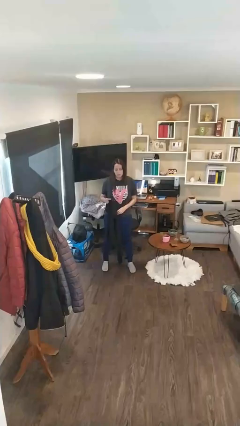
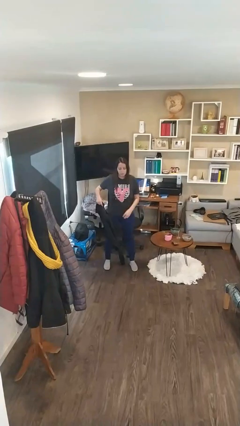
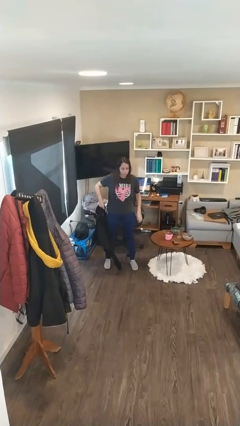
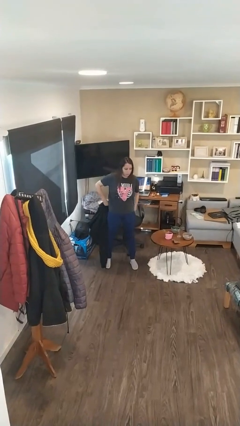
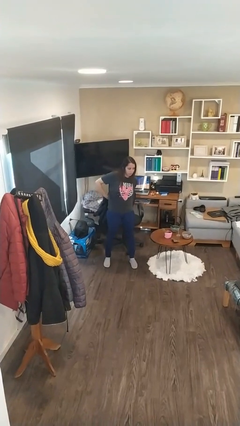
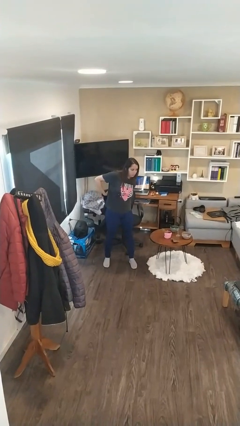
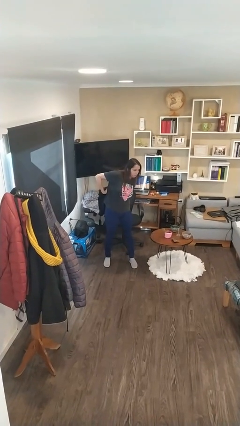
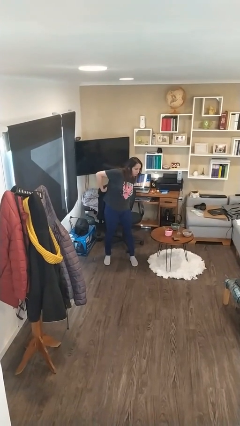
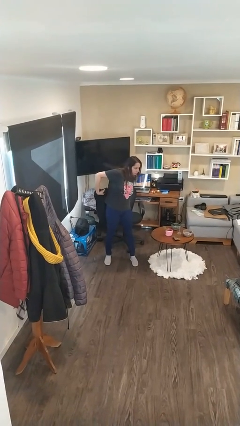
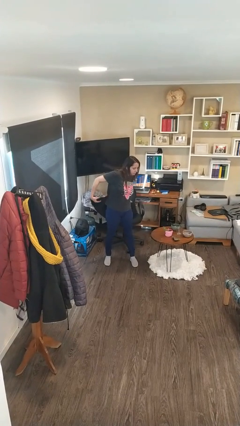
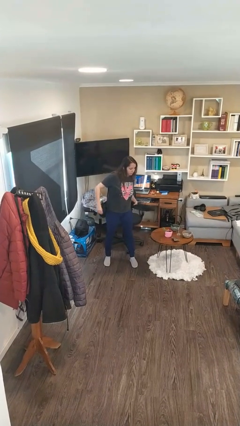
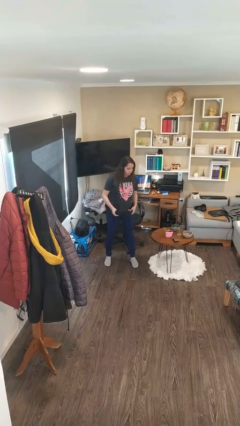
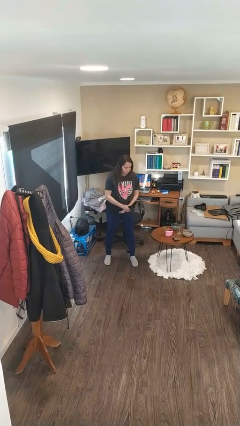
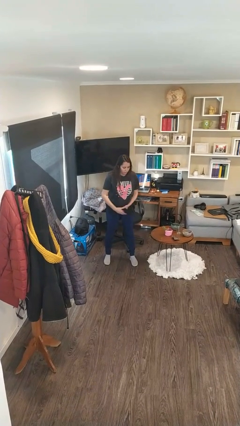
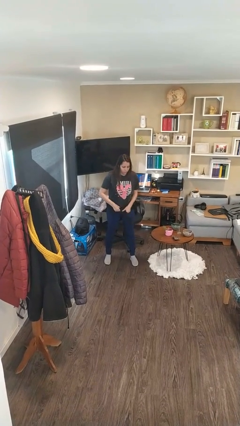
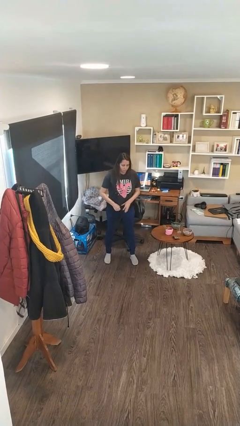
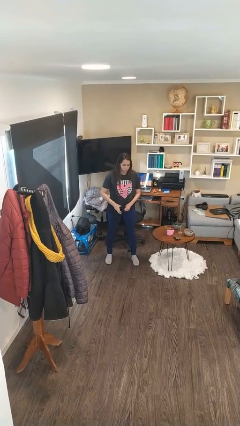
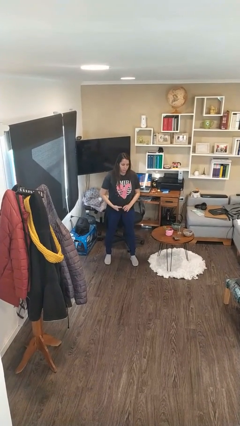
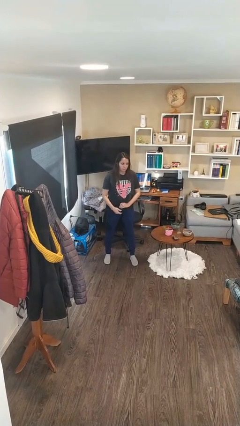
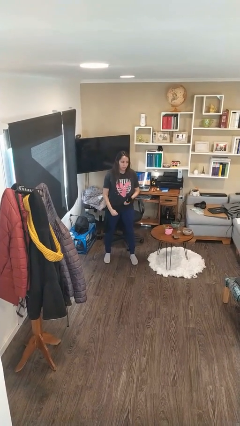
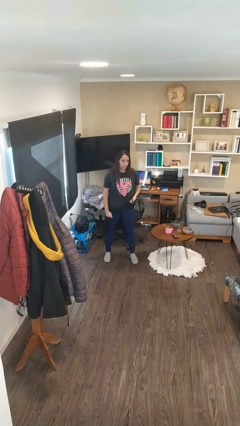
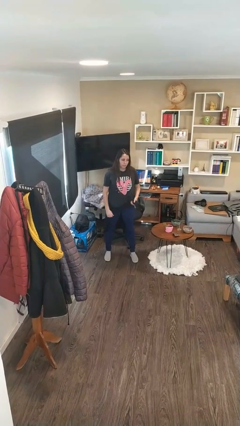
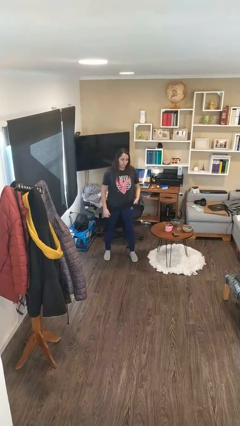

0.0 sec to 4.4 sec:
person ties jacket around waist

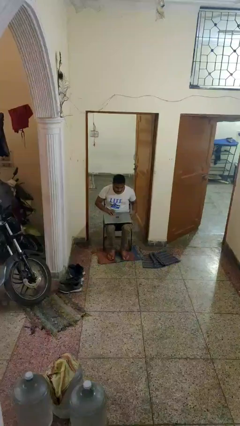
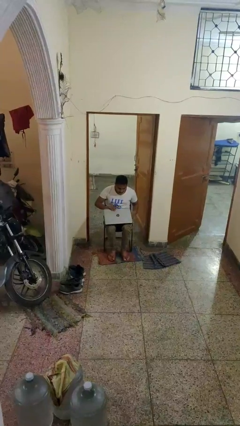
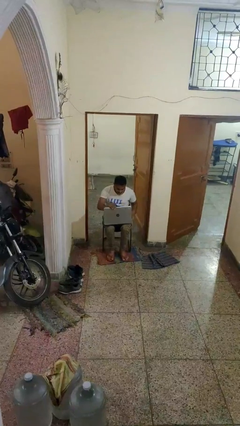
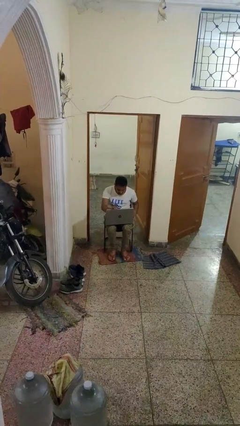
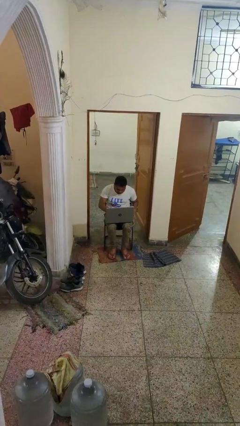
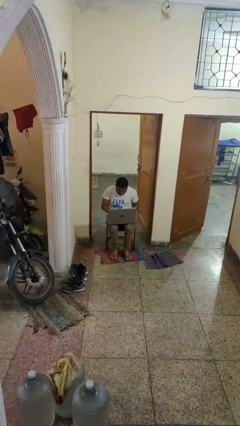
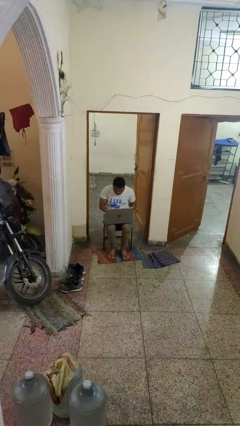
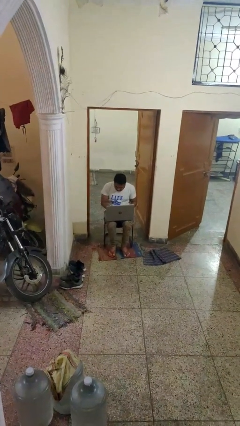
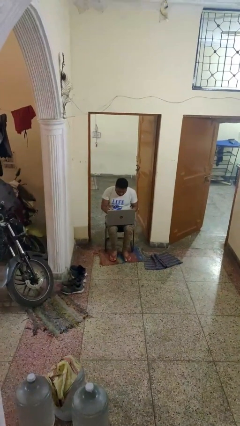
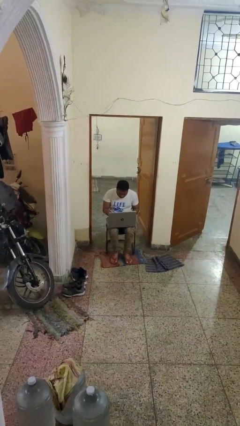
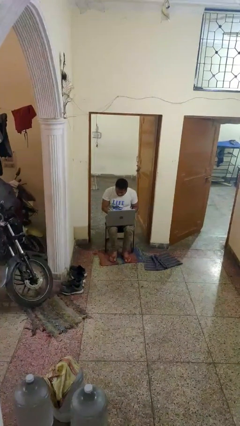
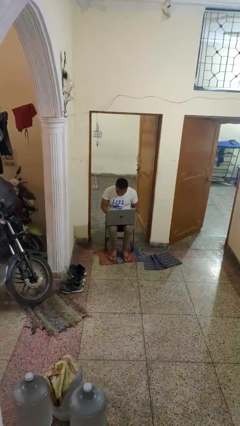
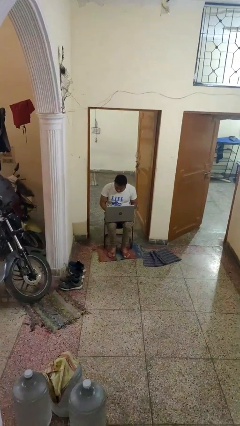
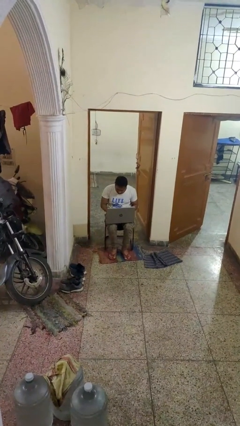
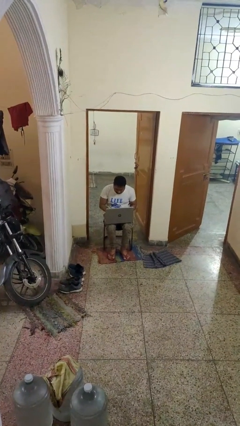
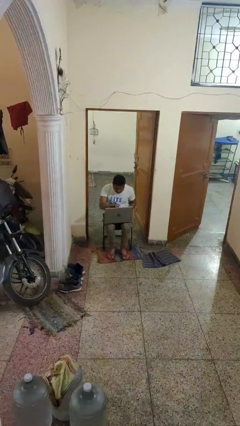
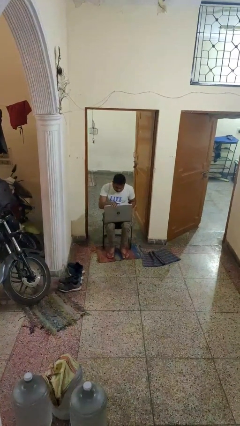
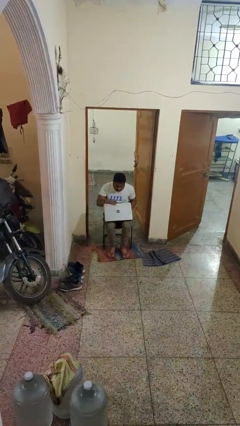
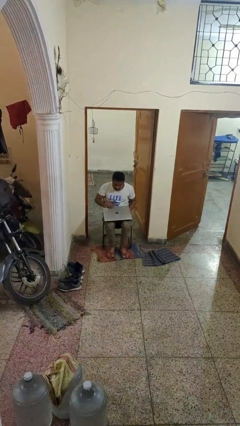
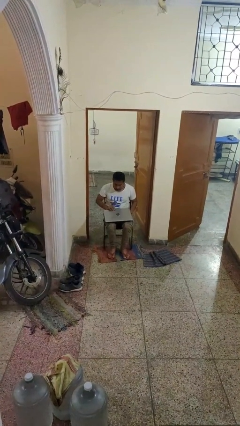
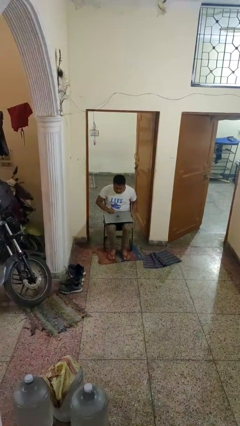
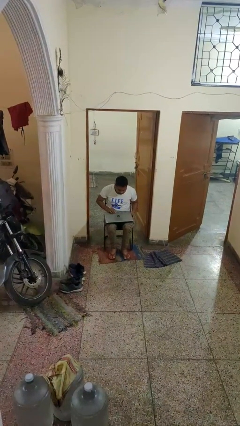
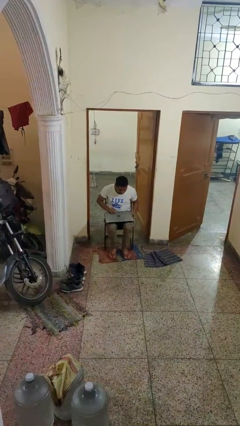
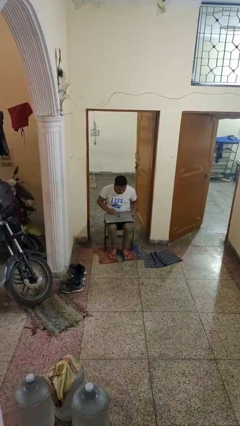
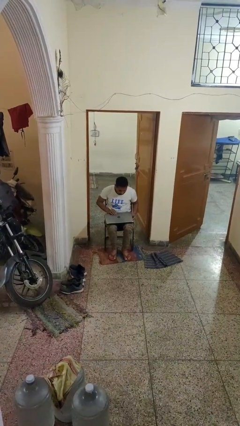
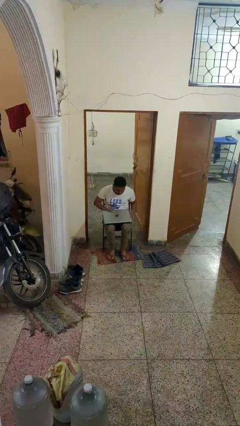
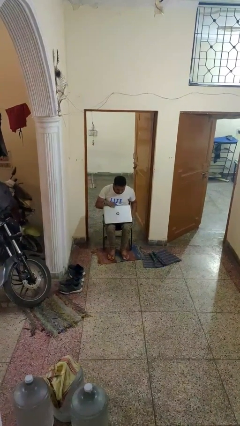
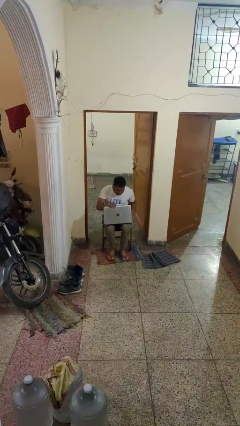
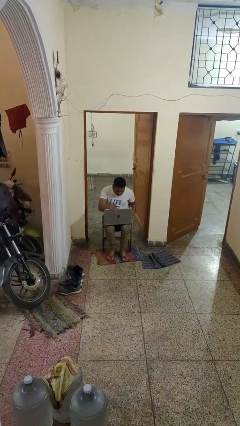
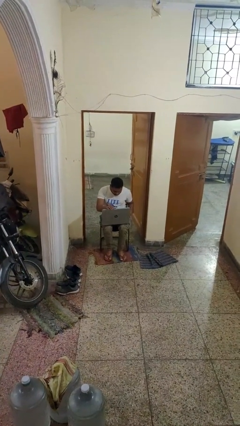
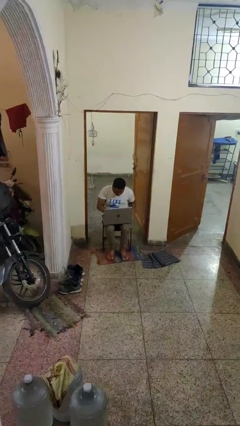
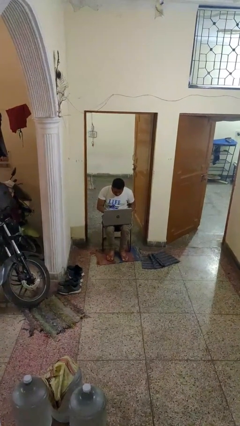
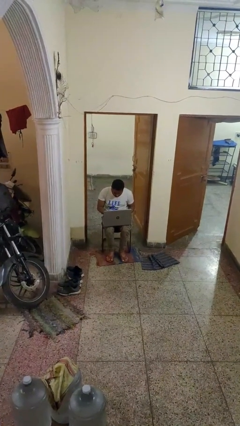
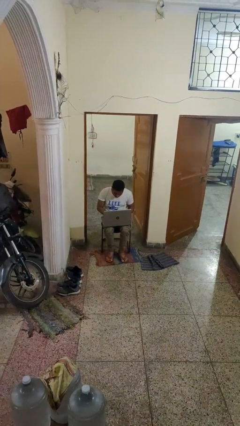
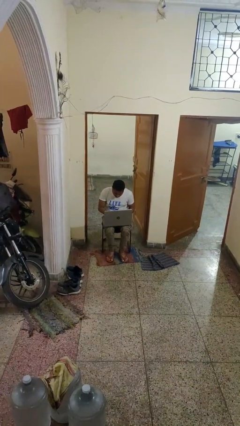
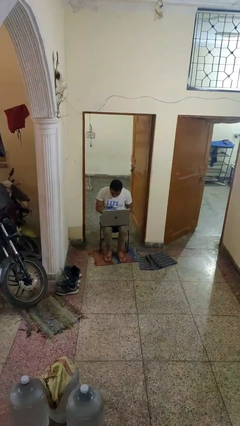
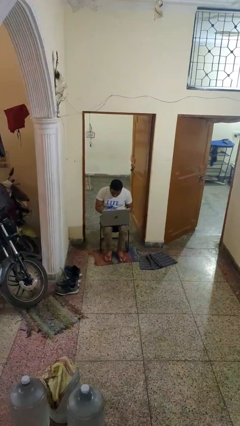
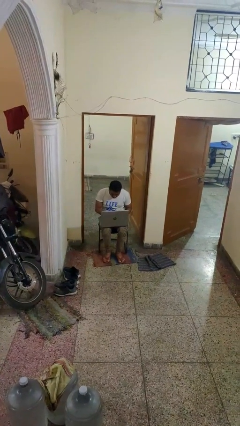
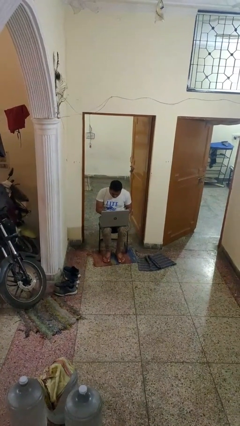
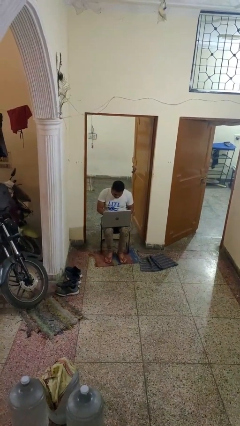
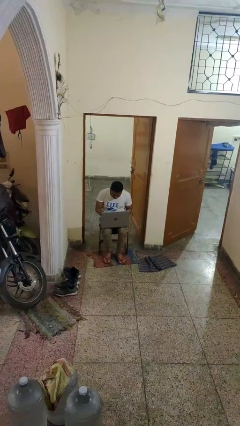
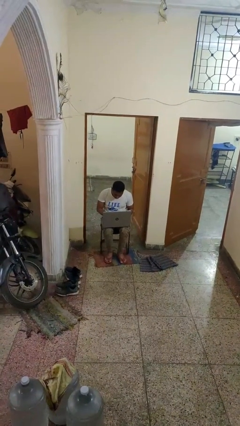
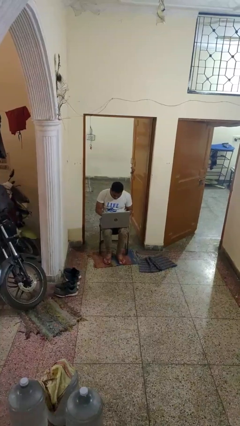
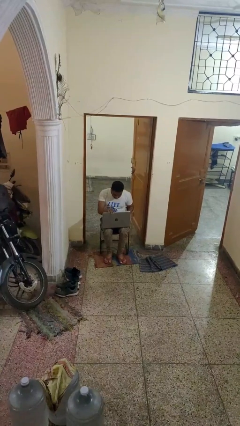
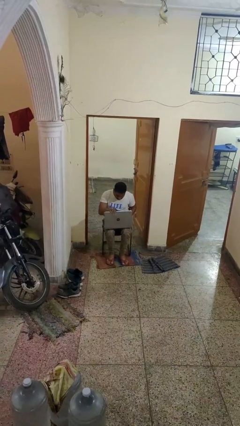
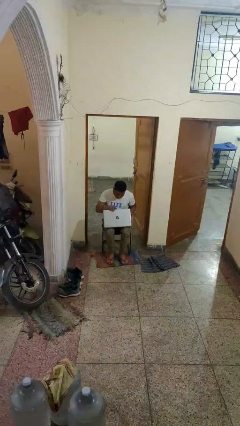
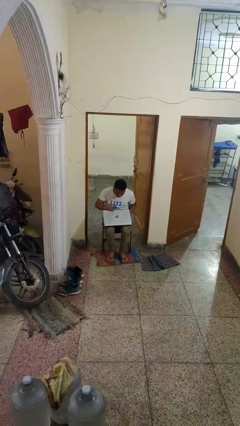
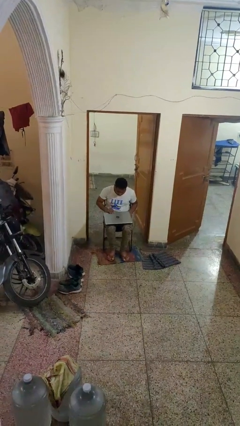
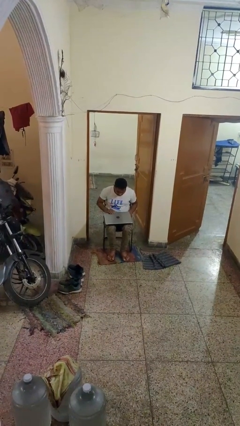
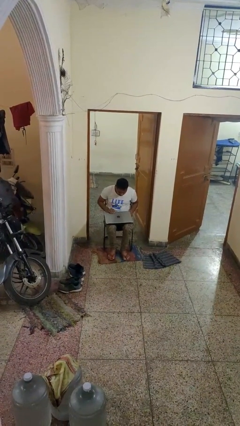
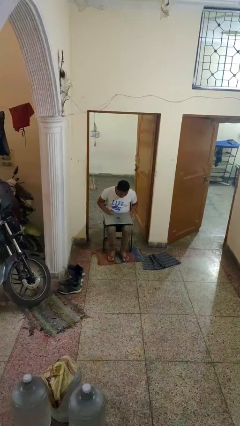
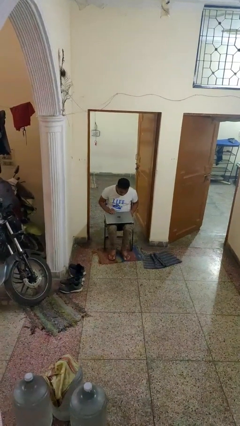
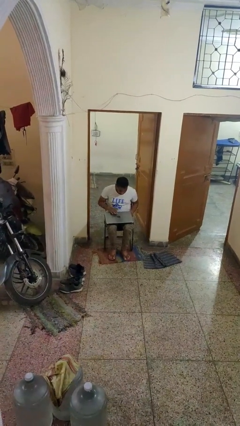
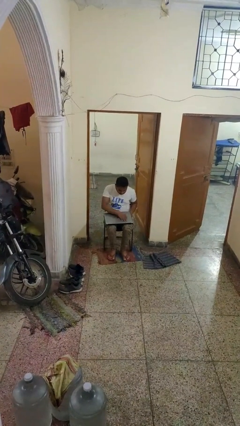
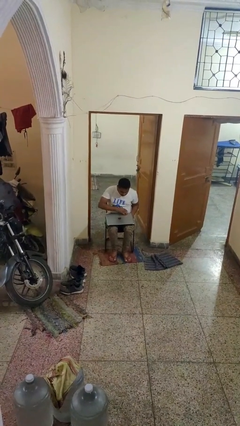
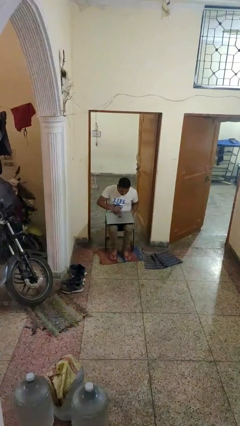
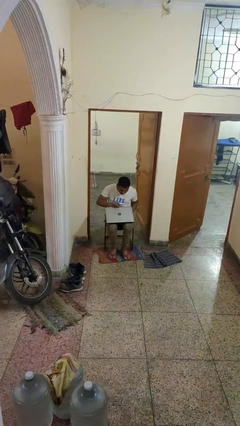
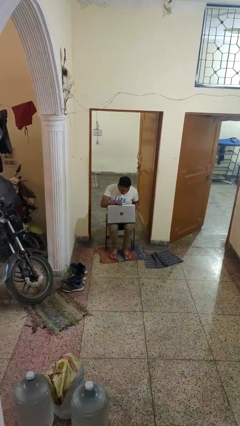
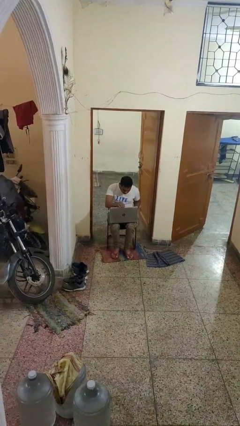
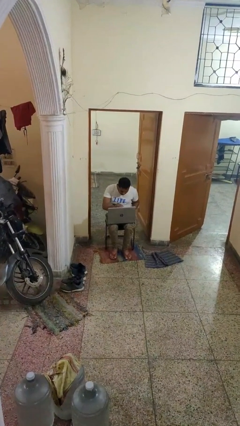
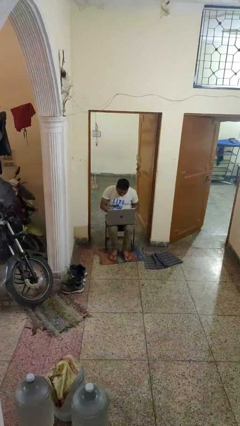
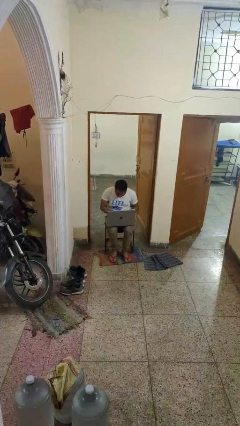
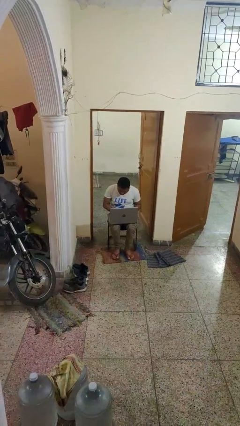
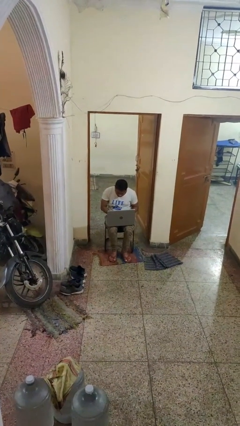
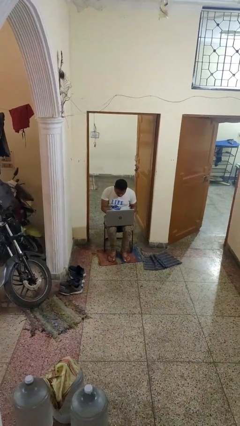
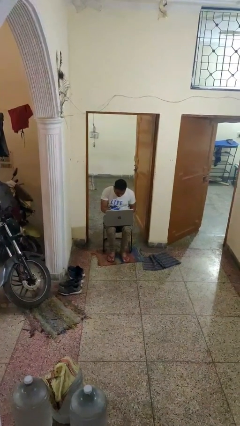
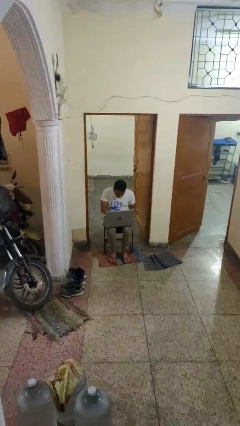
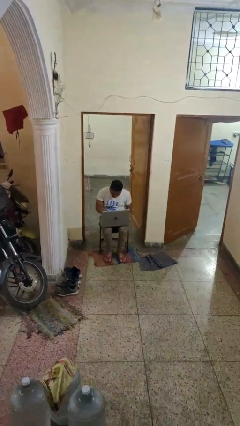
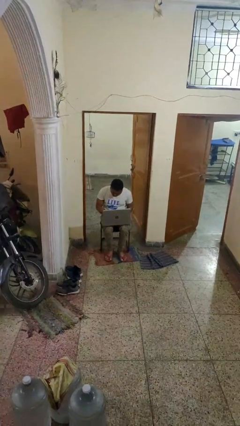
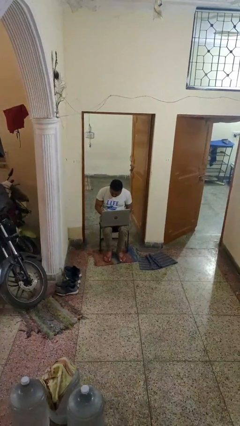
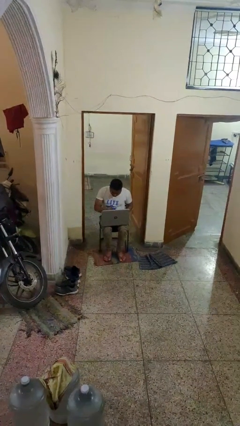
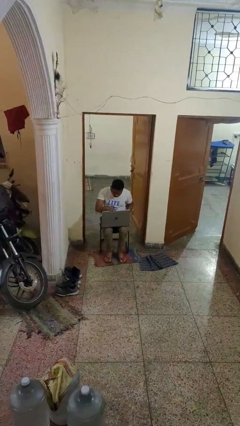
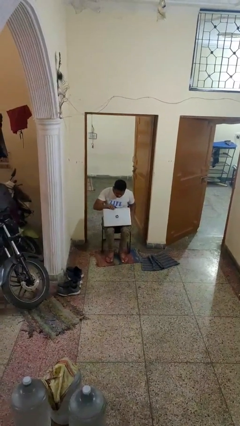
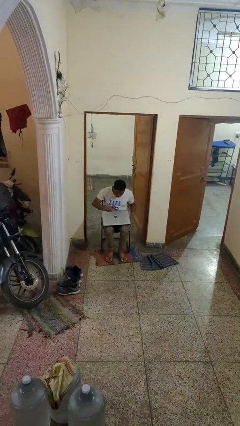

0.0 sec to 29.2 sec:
person interacts with laptop
